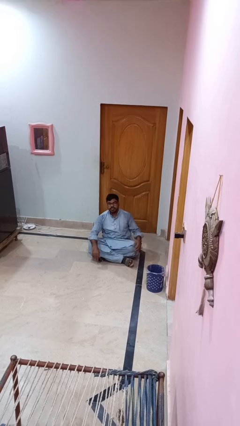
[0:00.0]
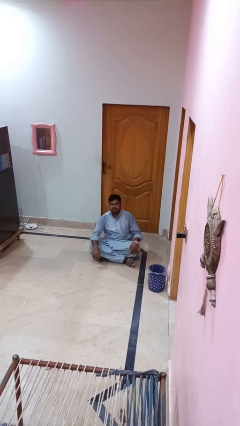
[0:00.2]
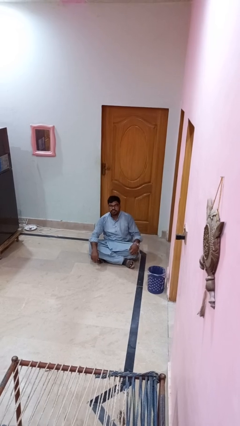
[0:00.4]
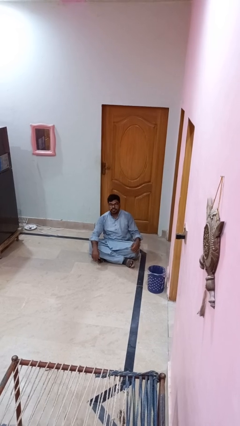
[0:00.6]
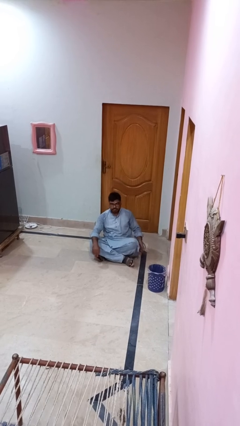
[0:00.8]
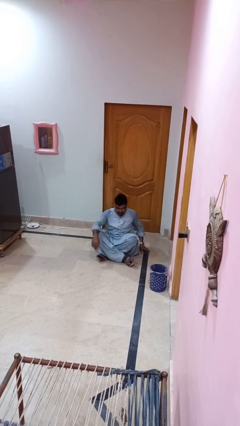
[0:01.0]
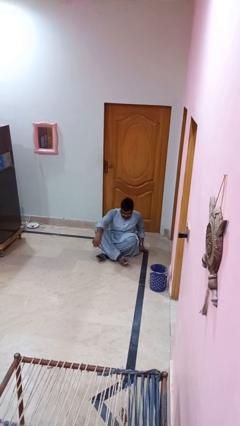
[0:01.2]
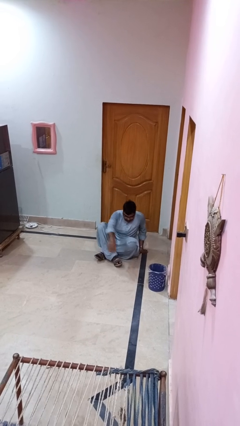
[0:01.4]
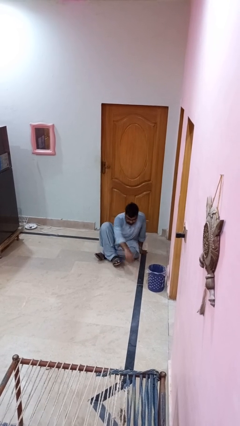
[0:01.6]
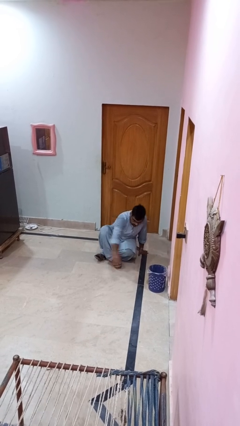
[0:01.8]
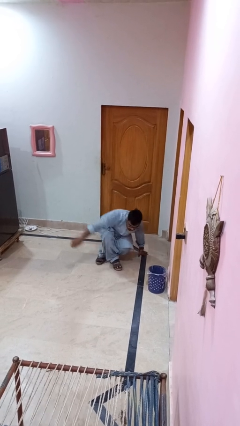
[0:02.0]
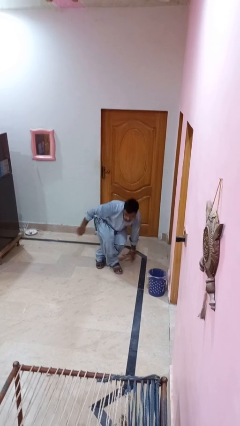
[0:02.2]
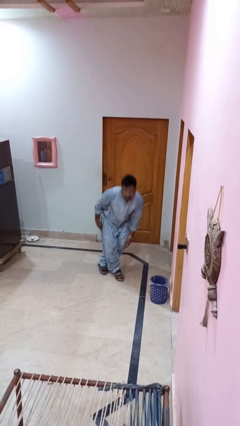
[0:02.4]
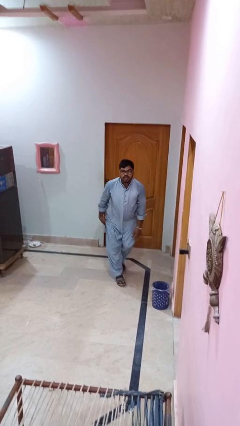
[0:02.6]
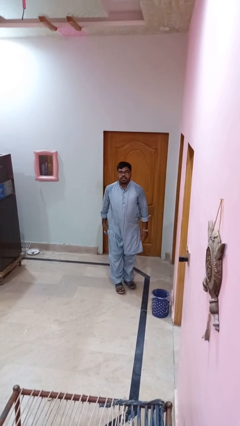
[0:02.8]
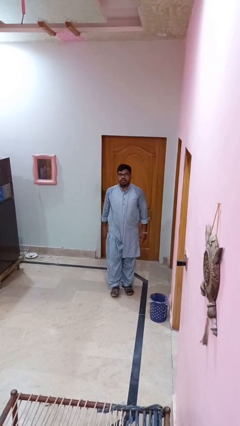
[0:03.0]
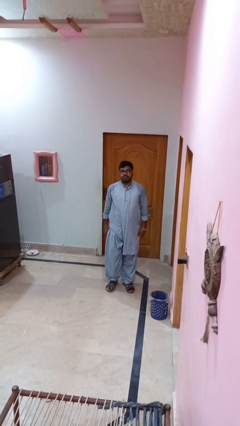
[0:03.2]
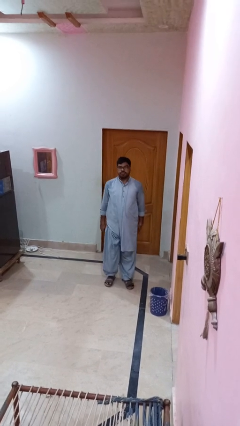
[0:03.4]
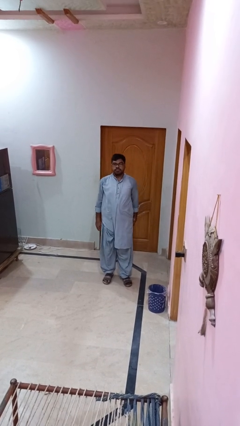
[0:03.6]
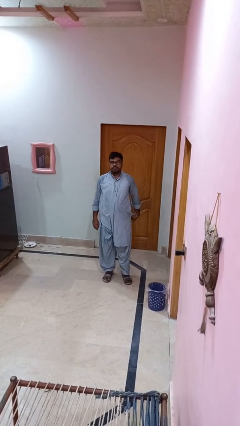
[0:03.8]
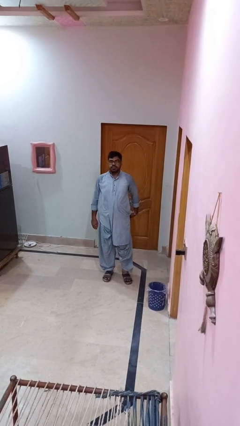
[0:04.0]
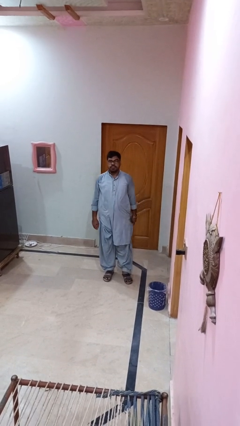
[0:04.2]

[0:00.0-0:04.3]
person stands up from floor

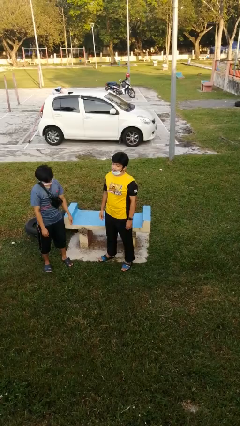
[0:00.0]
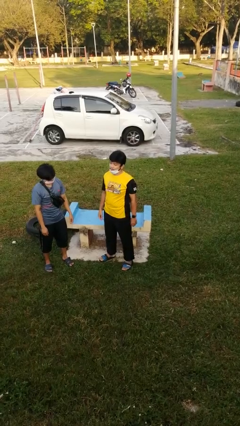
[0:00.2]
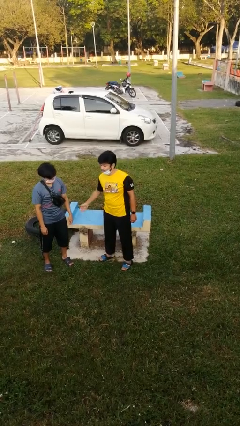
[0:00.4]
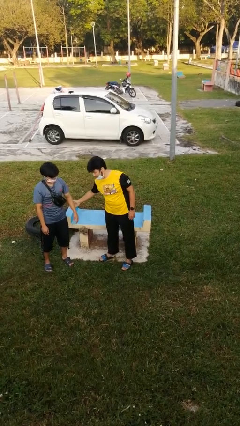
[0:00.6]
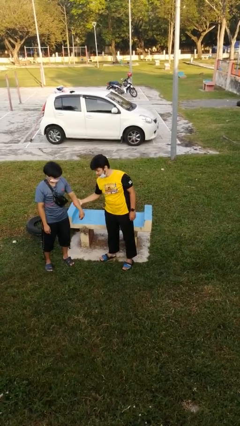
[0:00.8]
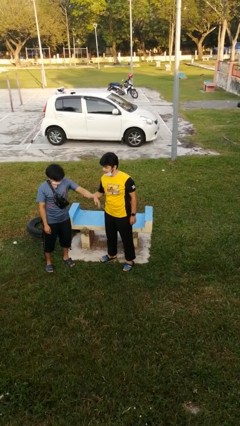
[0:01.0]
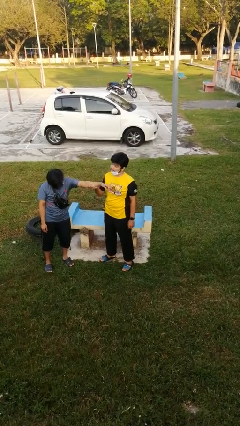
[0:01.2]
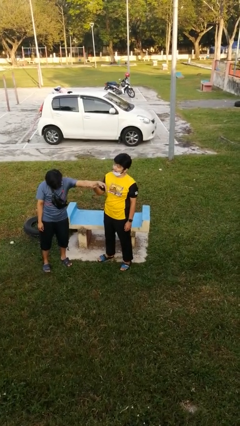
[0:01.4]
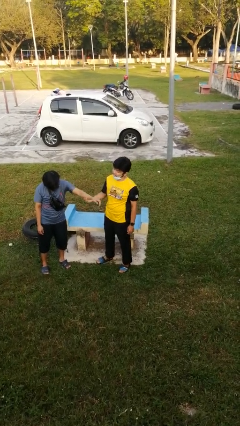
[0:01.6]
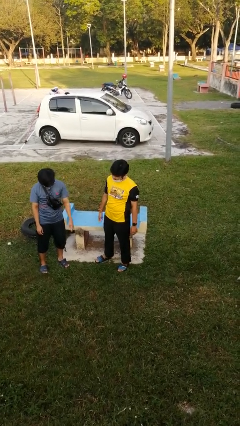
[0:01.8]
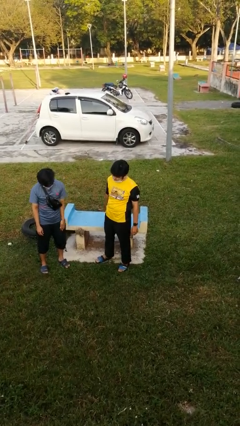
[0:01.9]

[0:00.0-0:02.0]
person grabs person by forearm

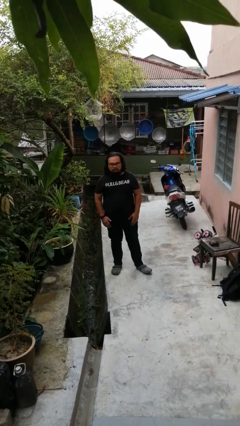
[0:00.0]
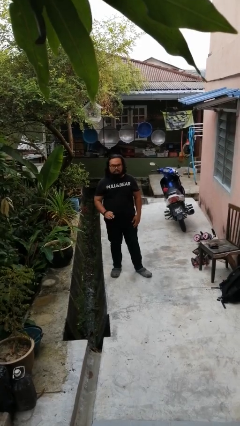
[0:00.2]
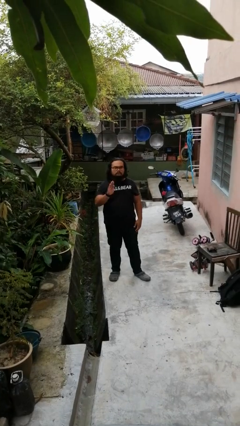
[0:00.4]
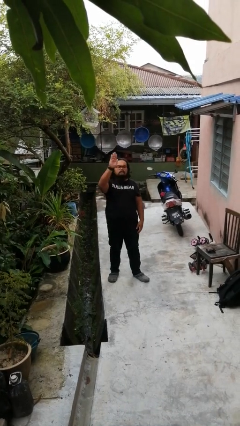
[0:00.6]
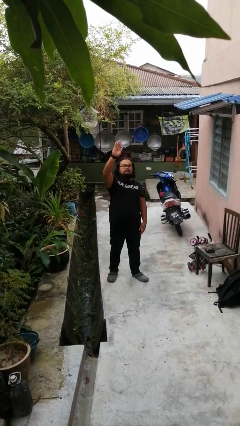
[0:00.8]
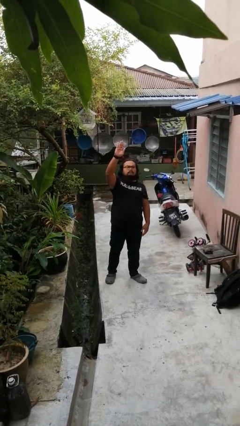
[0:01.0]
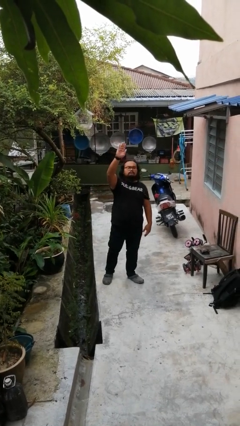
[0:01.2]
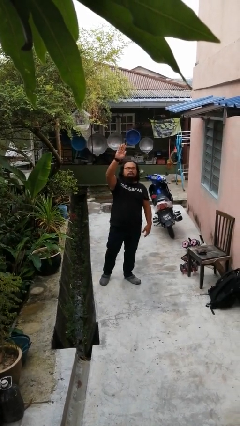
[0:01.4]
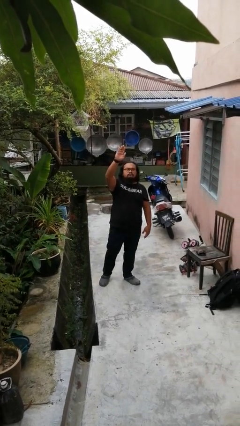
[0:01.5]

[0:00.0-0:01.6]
person gestures raise hand

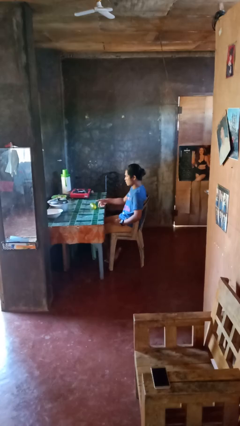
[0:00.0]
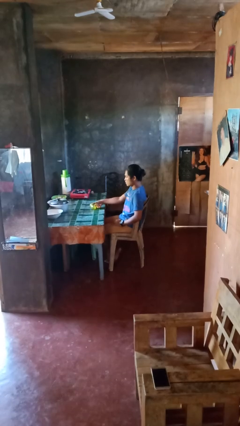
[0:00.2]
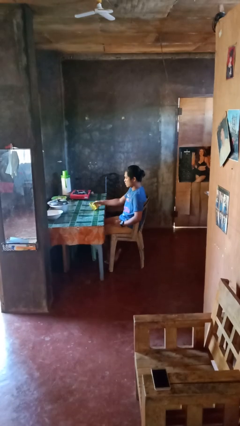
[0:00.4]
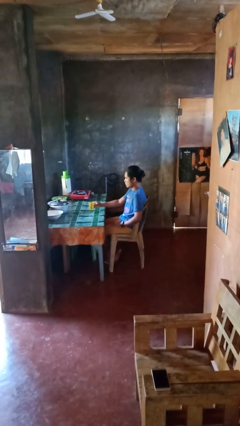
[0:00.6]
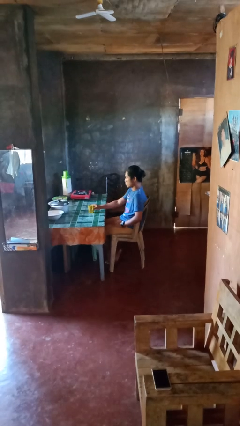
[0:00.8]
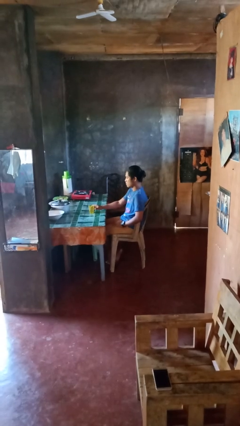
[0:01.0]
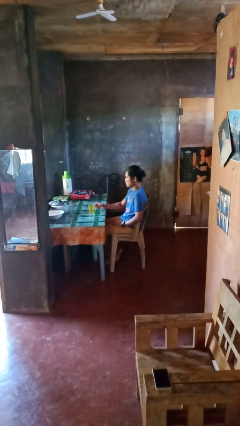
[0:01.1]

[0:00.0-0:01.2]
person sets upright glass

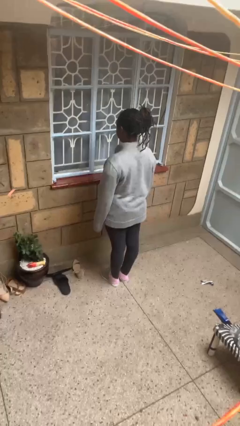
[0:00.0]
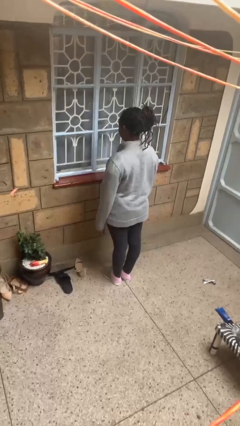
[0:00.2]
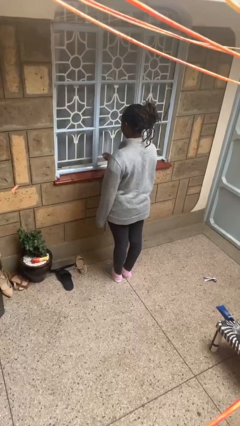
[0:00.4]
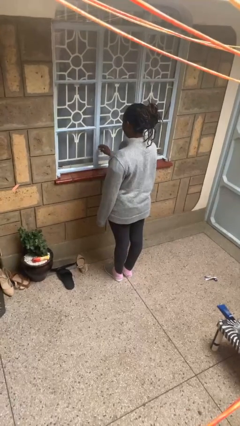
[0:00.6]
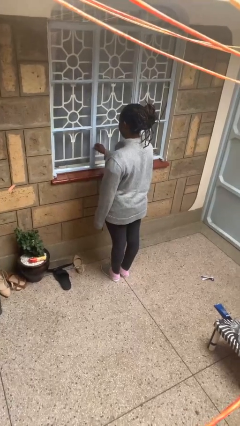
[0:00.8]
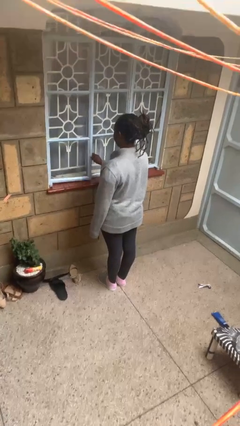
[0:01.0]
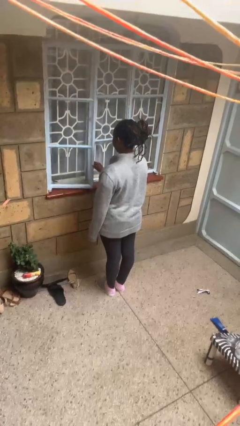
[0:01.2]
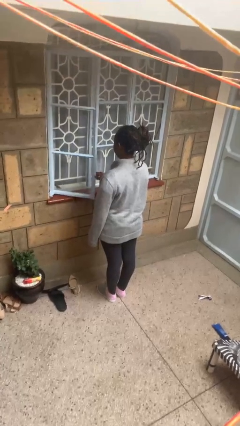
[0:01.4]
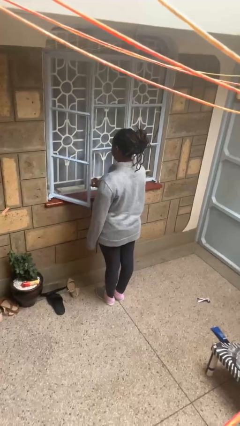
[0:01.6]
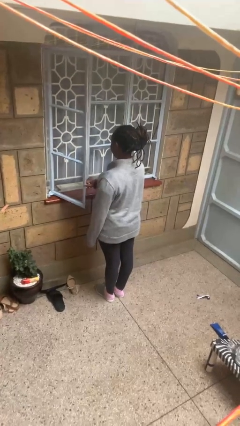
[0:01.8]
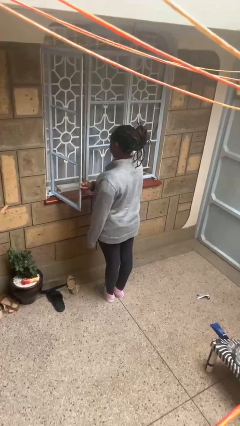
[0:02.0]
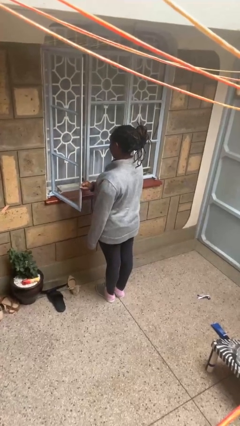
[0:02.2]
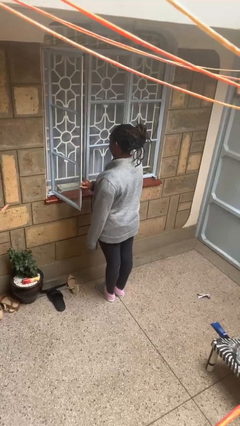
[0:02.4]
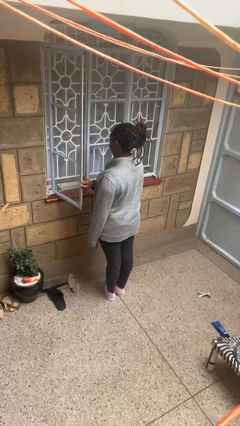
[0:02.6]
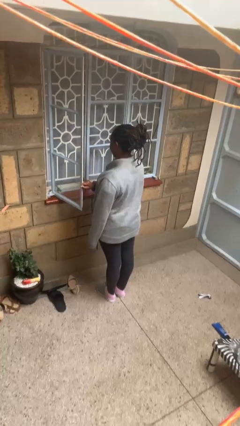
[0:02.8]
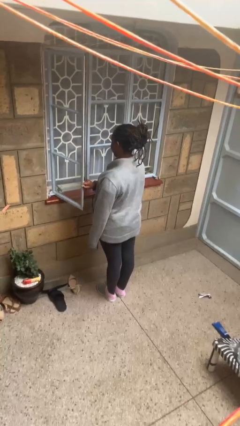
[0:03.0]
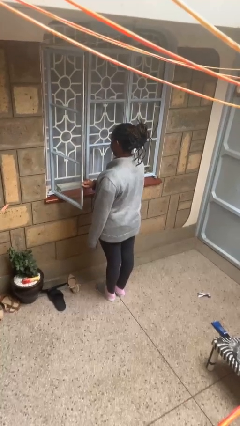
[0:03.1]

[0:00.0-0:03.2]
person opens home window

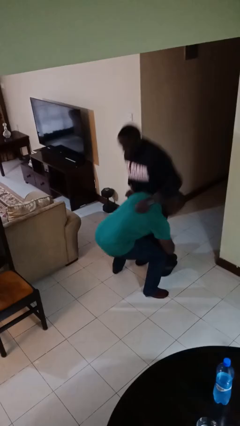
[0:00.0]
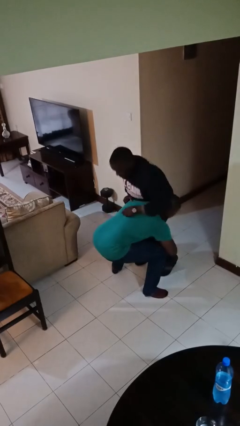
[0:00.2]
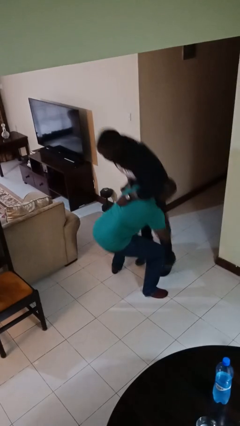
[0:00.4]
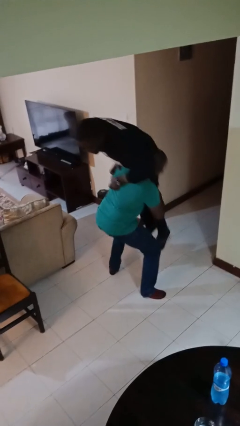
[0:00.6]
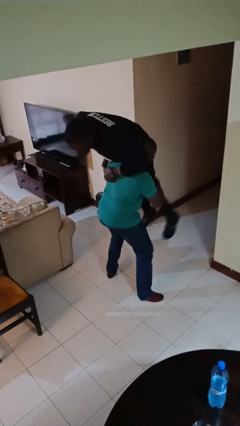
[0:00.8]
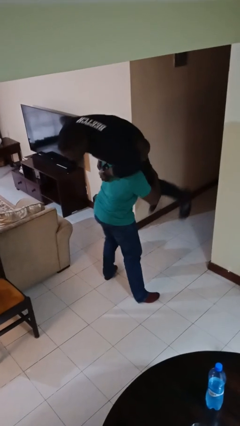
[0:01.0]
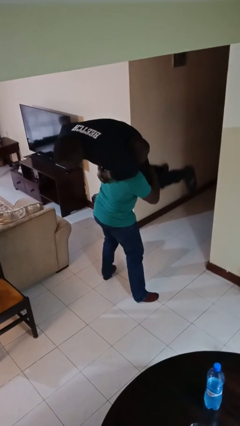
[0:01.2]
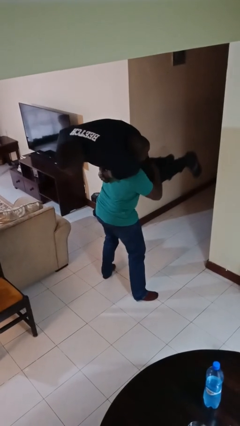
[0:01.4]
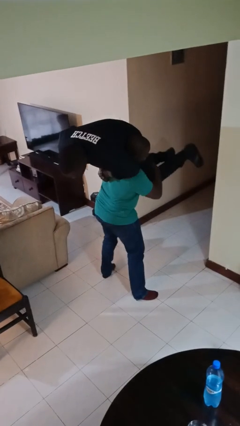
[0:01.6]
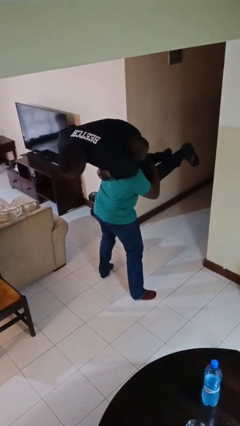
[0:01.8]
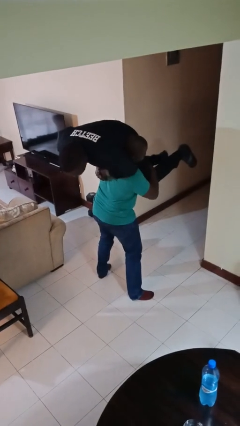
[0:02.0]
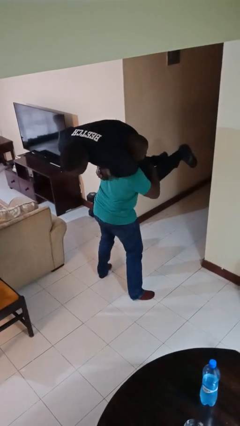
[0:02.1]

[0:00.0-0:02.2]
person carries person over shoulder

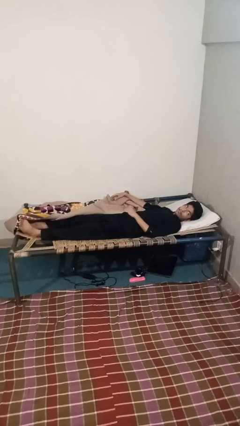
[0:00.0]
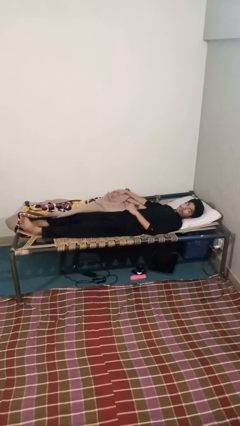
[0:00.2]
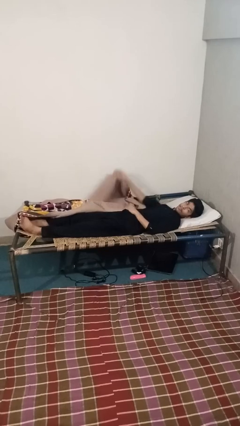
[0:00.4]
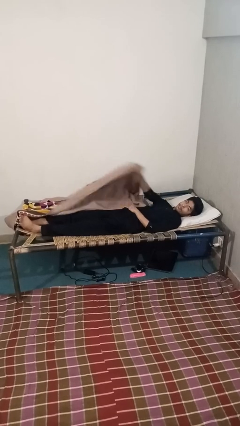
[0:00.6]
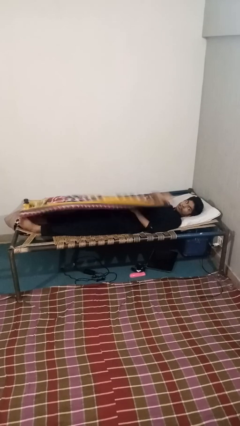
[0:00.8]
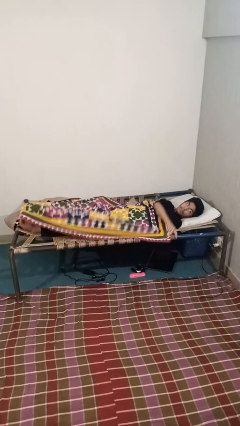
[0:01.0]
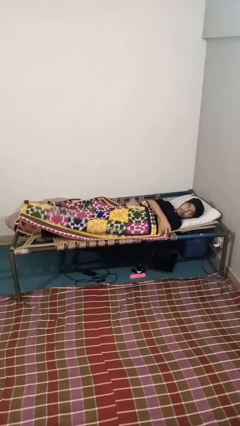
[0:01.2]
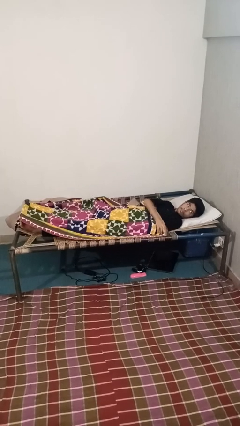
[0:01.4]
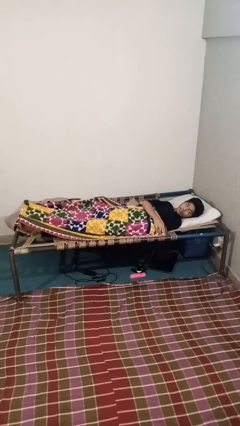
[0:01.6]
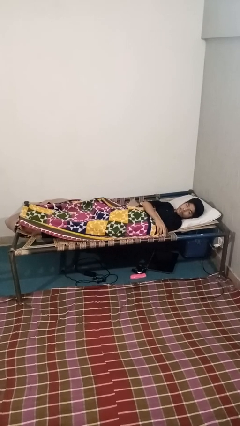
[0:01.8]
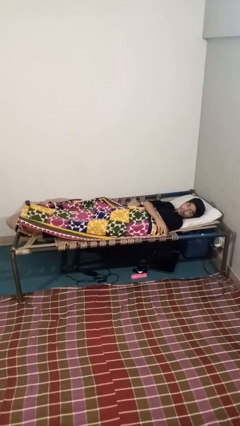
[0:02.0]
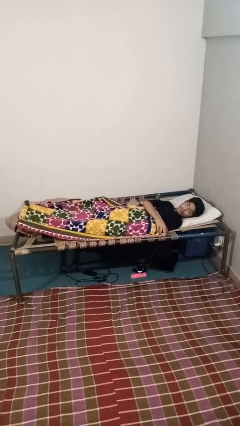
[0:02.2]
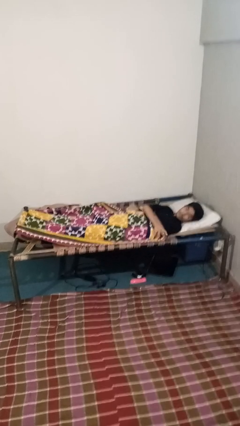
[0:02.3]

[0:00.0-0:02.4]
person covers with bedsheets
